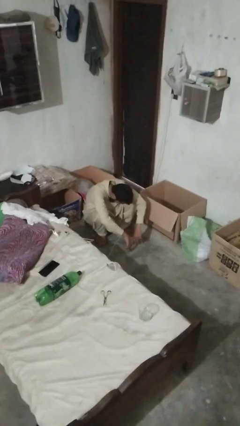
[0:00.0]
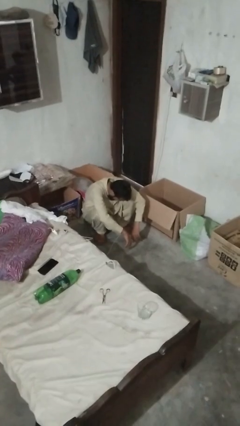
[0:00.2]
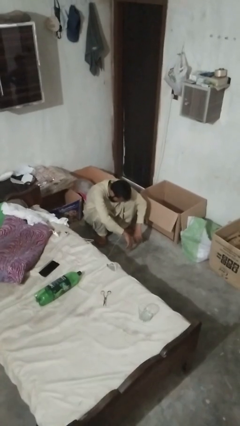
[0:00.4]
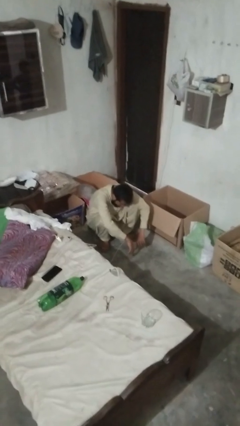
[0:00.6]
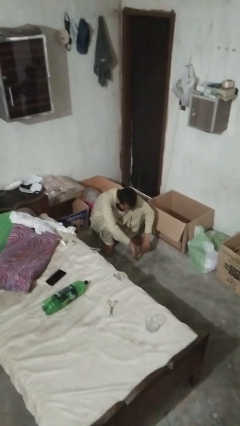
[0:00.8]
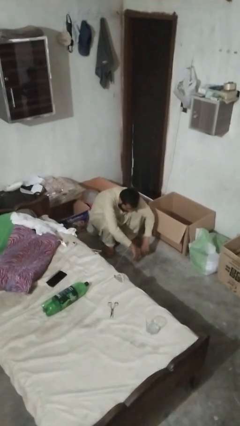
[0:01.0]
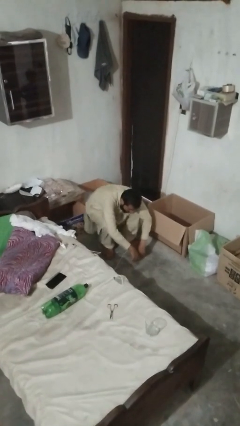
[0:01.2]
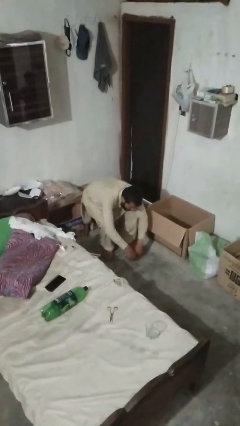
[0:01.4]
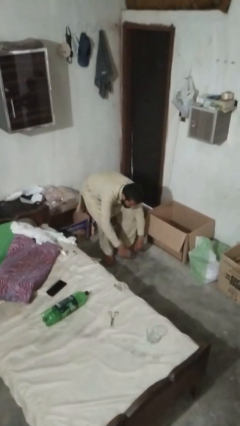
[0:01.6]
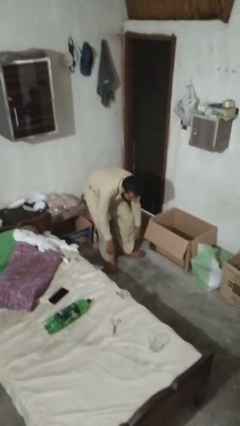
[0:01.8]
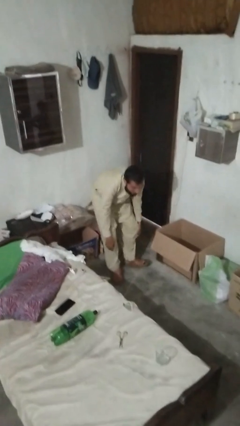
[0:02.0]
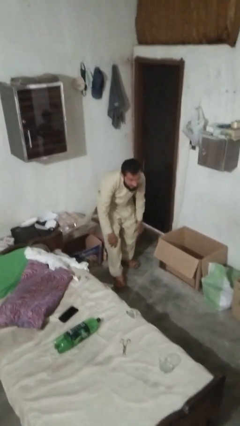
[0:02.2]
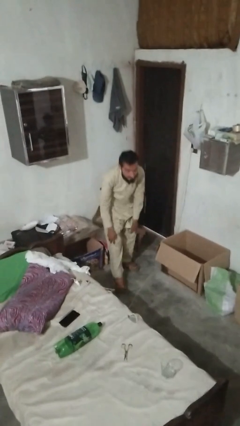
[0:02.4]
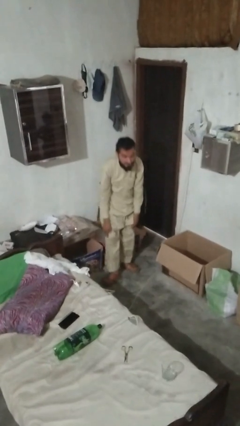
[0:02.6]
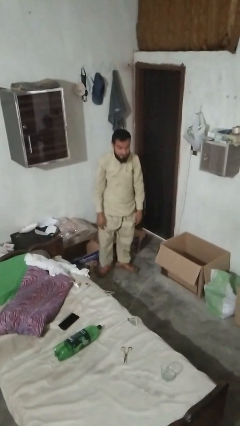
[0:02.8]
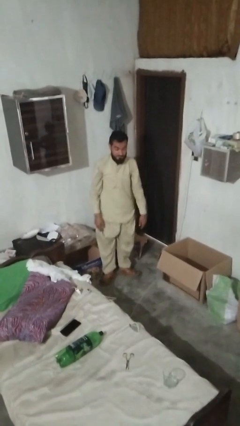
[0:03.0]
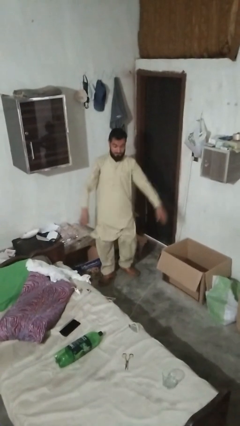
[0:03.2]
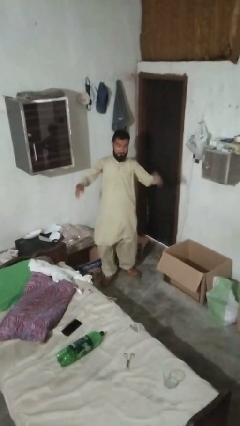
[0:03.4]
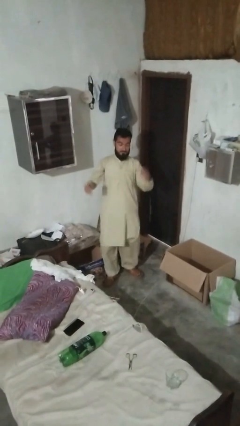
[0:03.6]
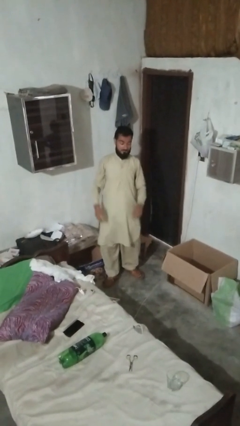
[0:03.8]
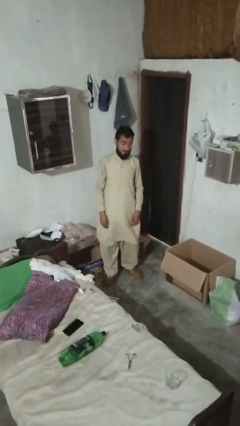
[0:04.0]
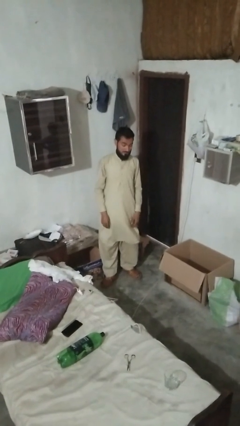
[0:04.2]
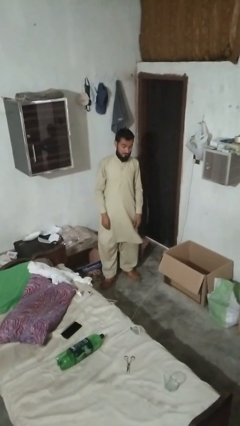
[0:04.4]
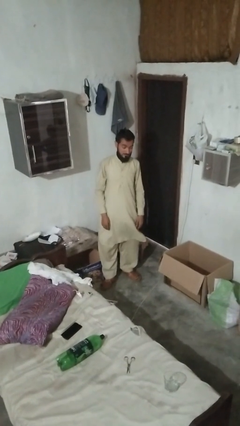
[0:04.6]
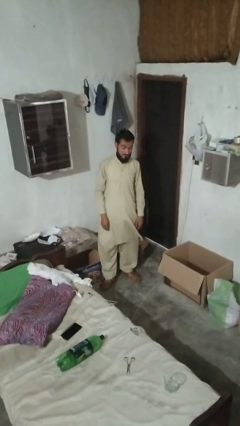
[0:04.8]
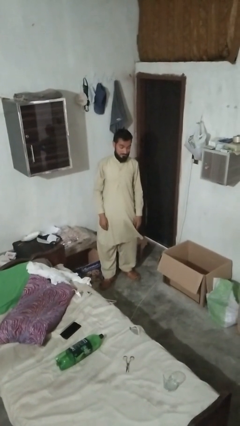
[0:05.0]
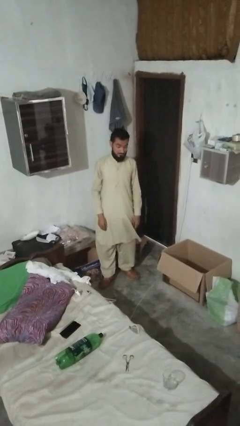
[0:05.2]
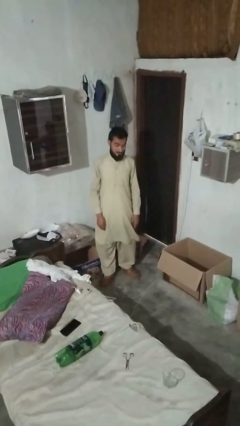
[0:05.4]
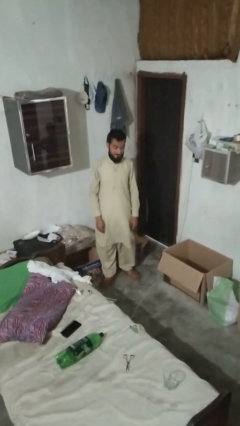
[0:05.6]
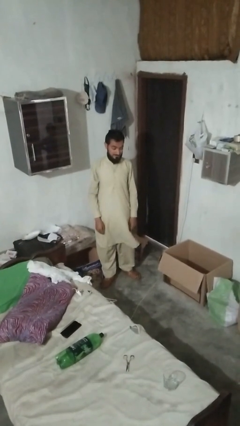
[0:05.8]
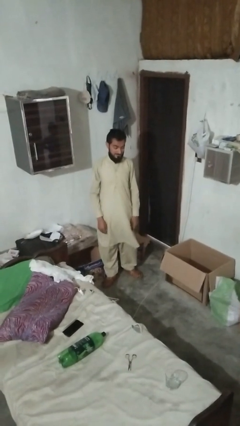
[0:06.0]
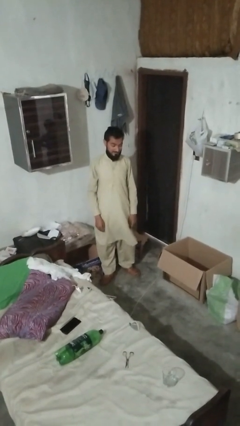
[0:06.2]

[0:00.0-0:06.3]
person stands up from floor

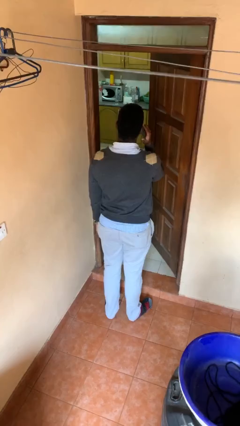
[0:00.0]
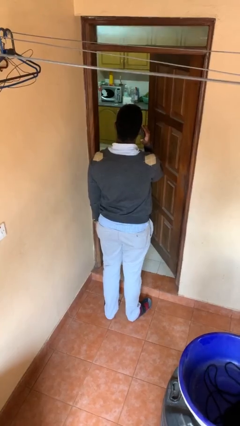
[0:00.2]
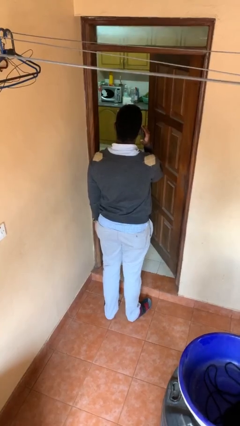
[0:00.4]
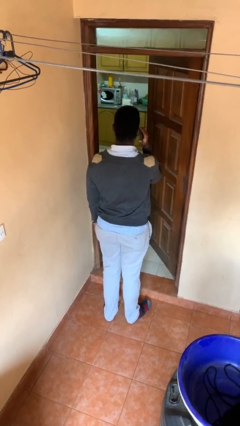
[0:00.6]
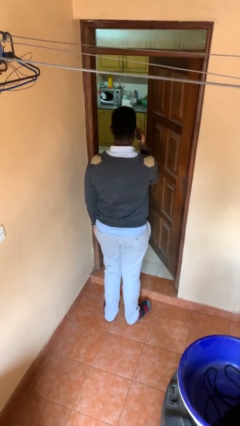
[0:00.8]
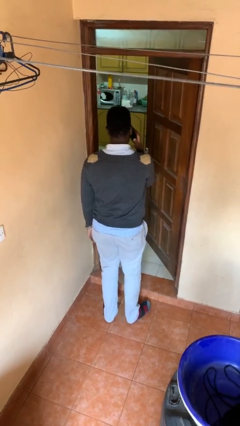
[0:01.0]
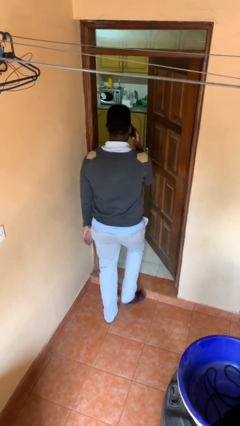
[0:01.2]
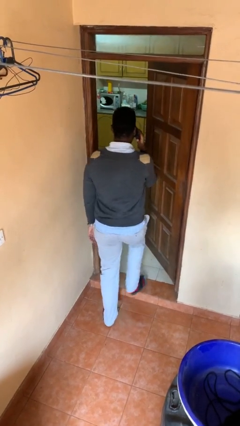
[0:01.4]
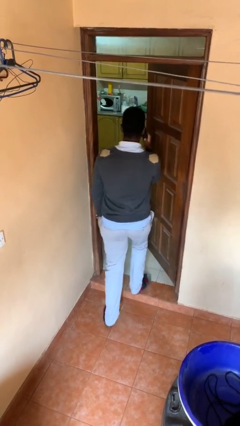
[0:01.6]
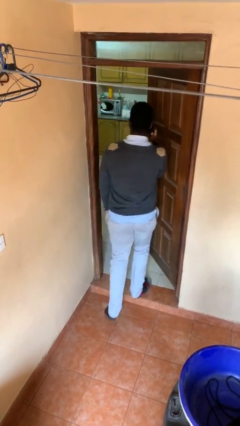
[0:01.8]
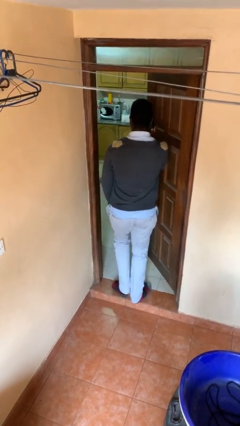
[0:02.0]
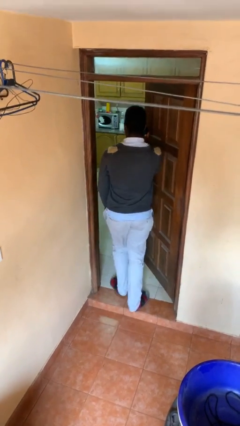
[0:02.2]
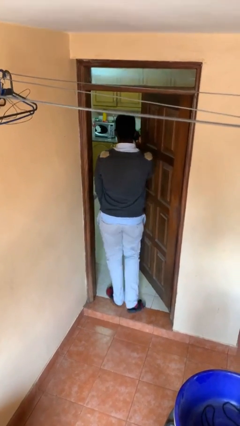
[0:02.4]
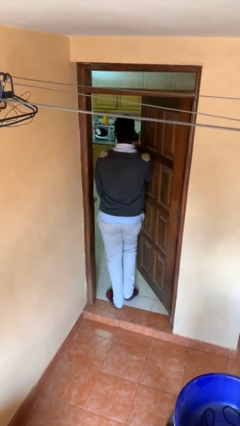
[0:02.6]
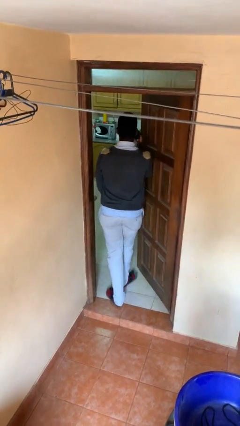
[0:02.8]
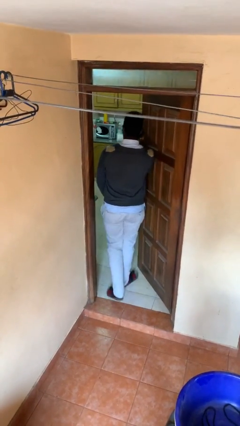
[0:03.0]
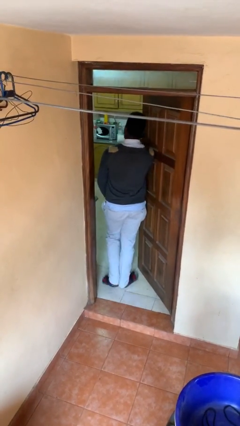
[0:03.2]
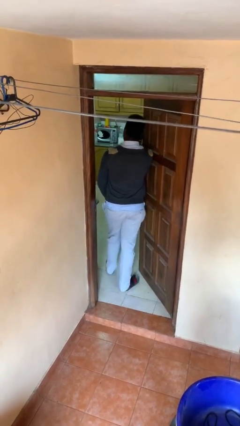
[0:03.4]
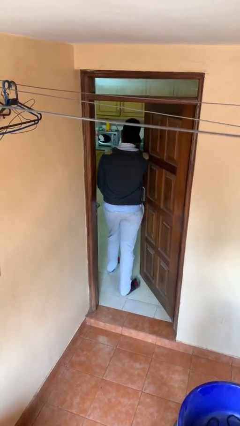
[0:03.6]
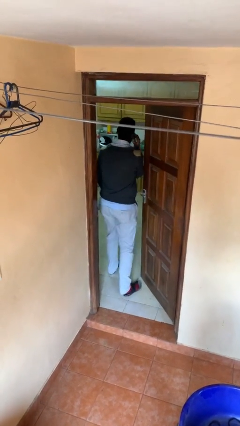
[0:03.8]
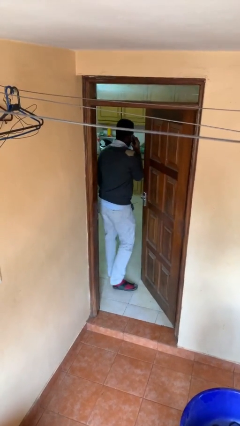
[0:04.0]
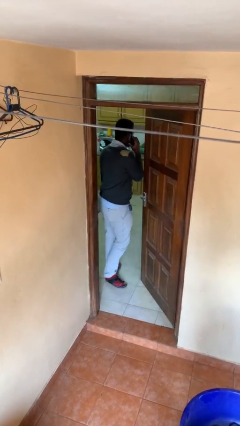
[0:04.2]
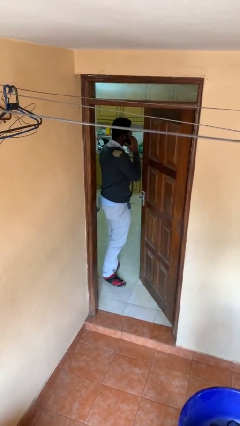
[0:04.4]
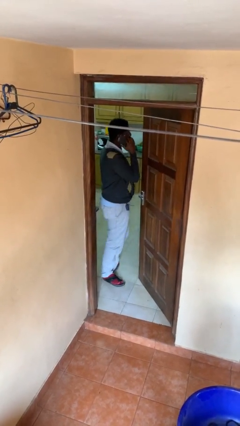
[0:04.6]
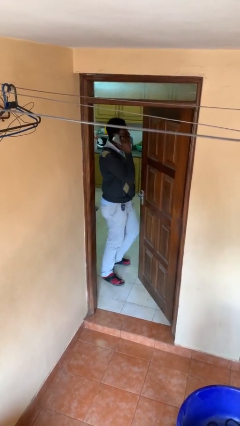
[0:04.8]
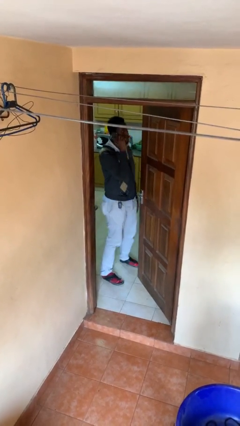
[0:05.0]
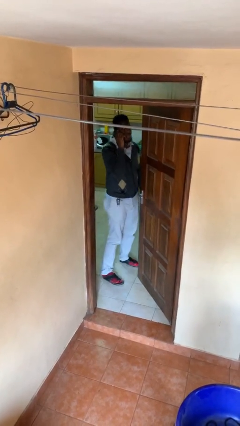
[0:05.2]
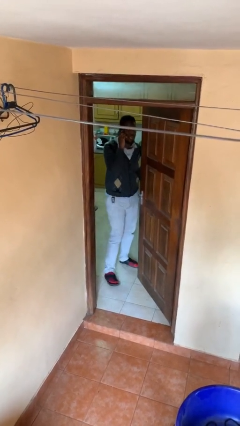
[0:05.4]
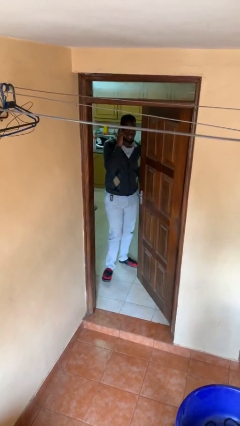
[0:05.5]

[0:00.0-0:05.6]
person exits scene through structure

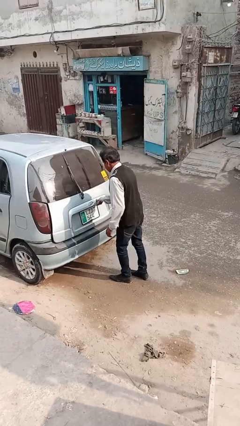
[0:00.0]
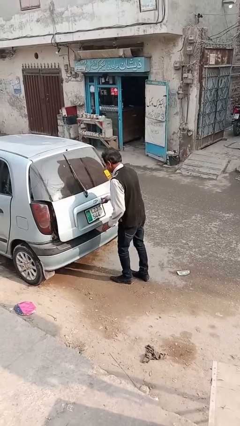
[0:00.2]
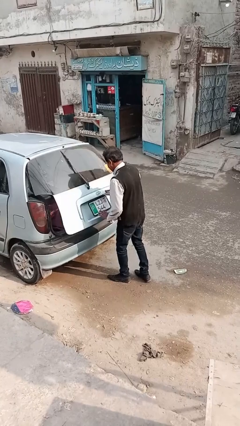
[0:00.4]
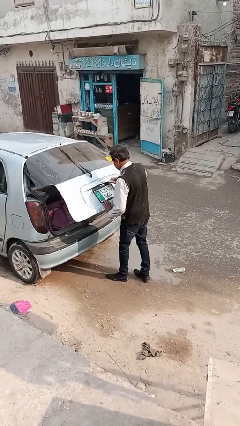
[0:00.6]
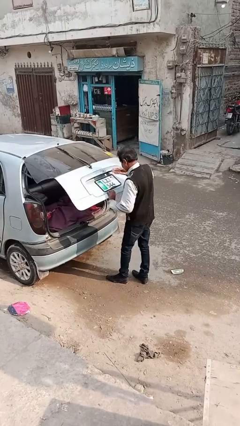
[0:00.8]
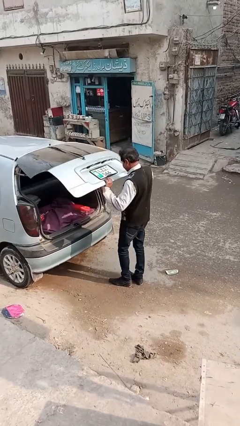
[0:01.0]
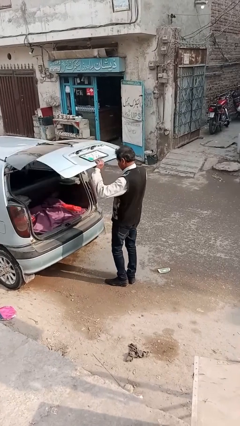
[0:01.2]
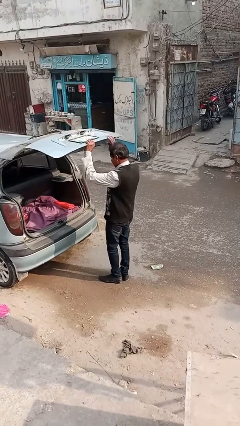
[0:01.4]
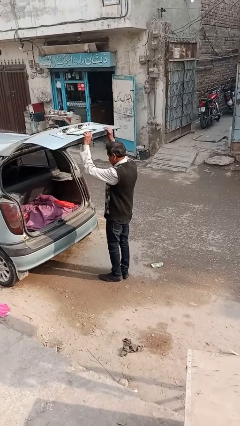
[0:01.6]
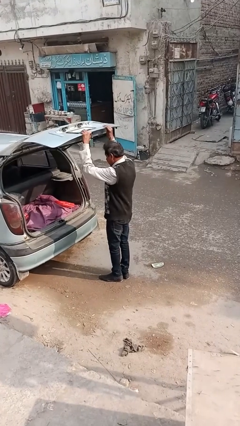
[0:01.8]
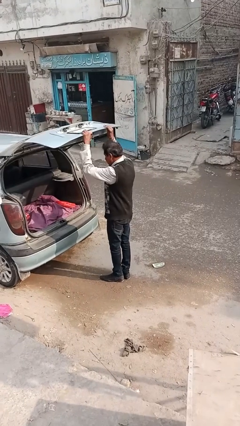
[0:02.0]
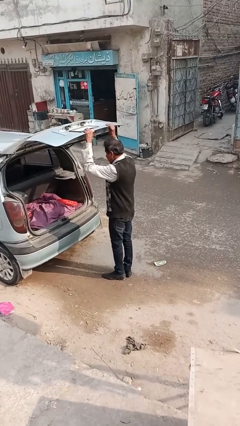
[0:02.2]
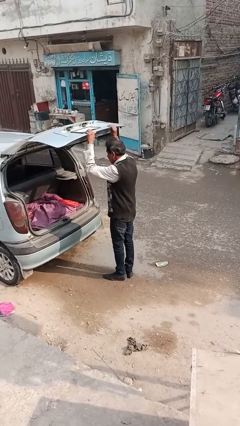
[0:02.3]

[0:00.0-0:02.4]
person opens car trunk

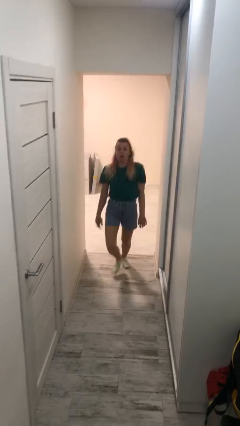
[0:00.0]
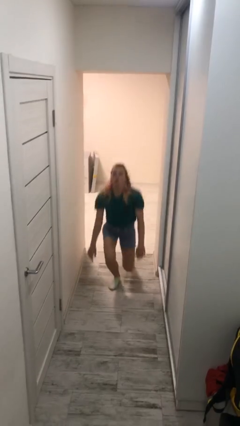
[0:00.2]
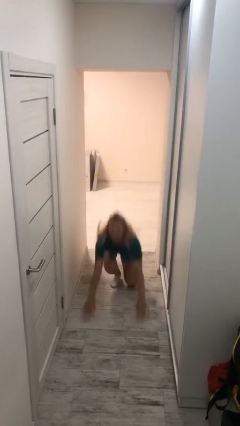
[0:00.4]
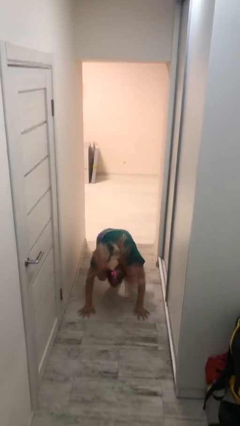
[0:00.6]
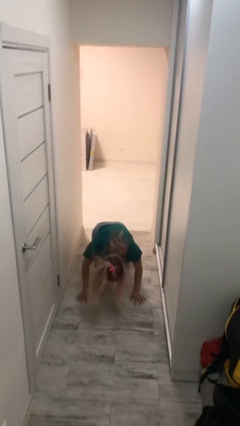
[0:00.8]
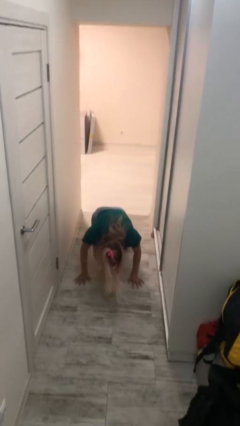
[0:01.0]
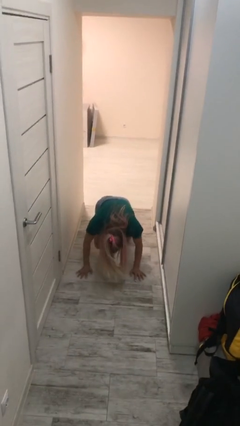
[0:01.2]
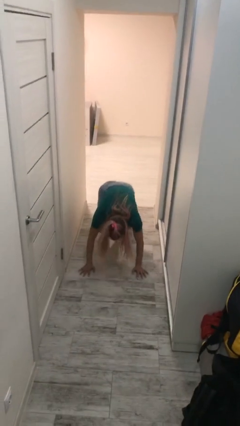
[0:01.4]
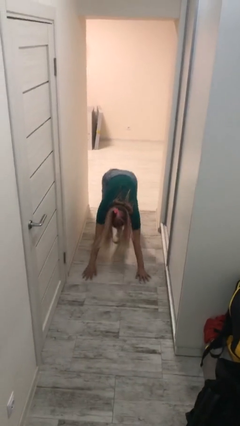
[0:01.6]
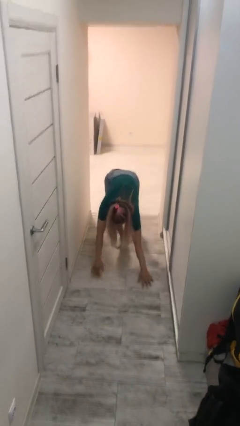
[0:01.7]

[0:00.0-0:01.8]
person trips on object on floor

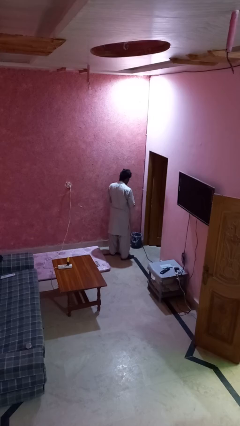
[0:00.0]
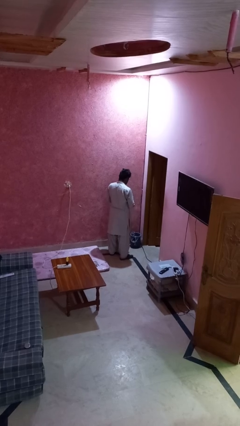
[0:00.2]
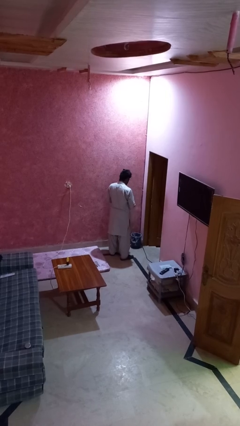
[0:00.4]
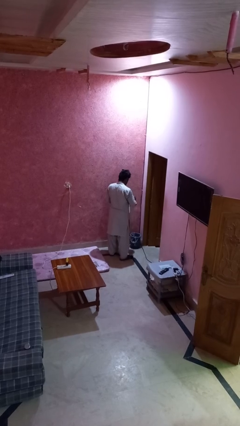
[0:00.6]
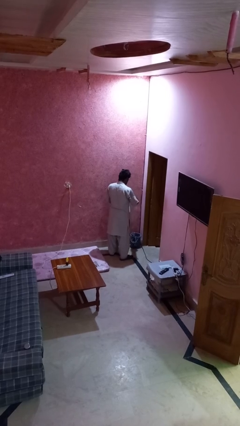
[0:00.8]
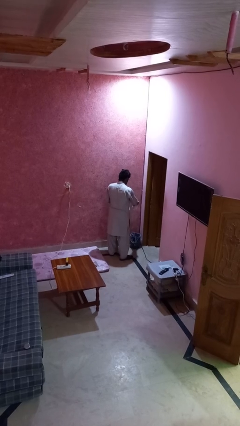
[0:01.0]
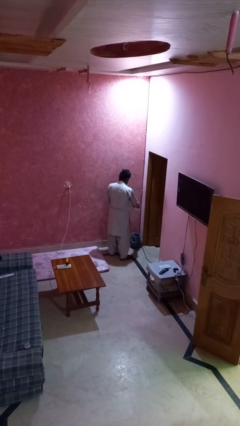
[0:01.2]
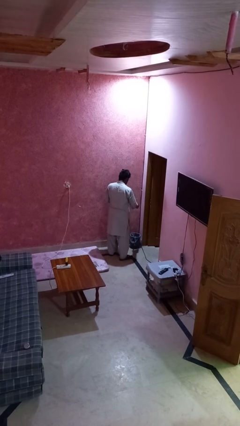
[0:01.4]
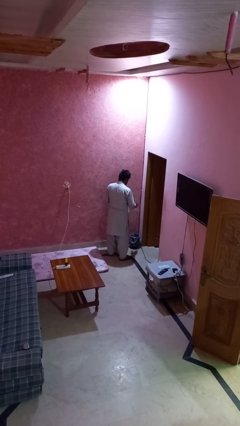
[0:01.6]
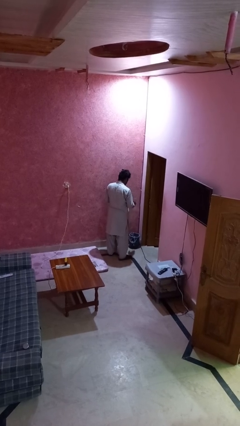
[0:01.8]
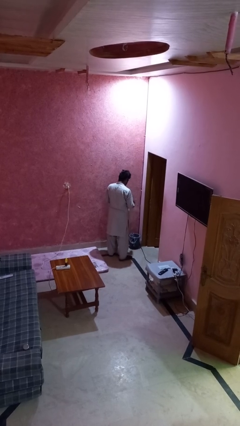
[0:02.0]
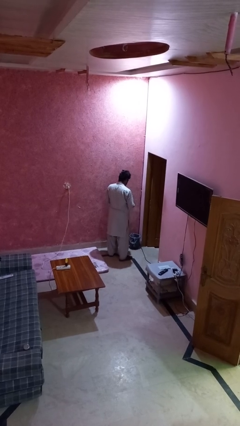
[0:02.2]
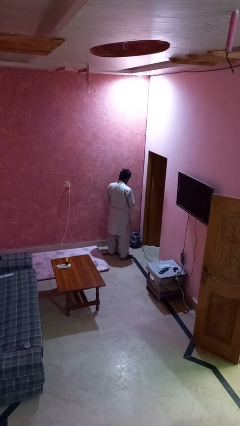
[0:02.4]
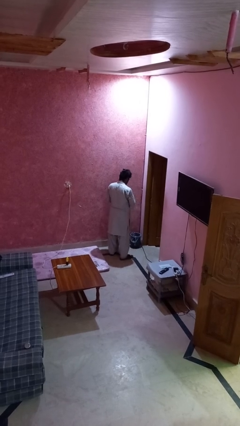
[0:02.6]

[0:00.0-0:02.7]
person discards trash
